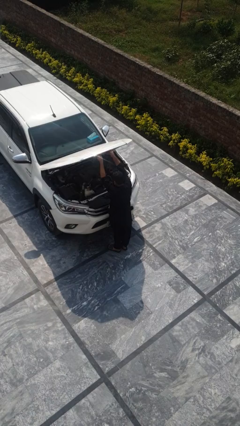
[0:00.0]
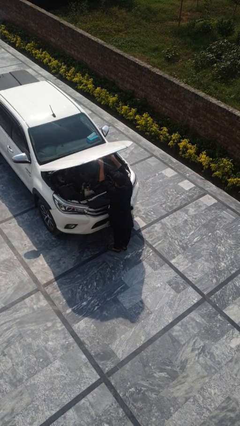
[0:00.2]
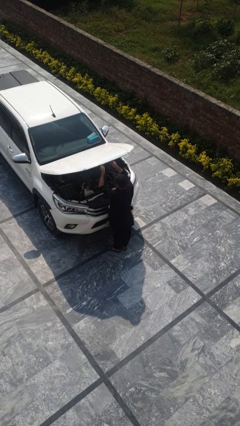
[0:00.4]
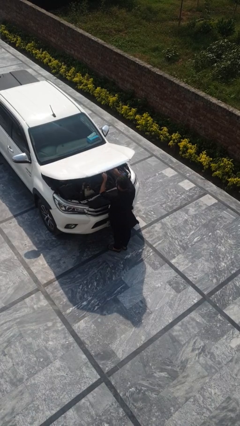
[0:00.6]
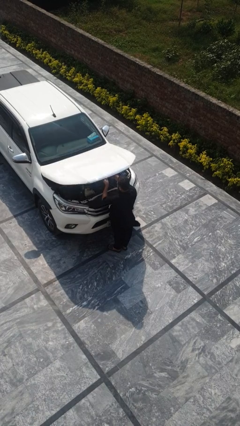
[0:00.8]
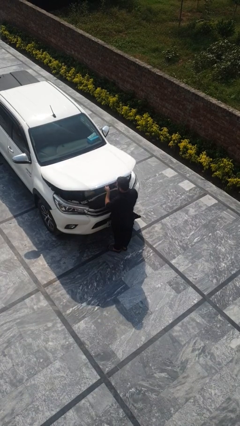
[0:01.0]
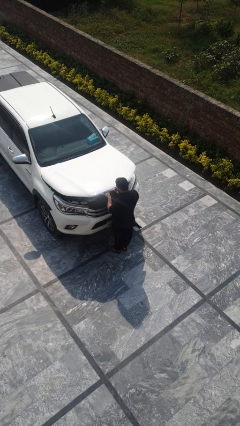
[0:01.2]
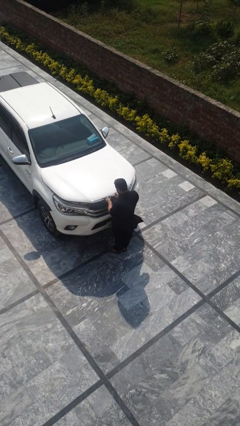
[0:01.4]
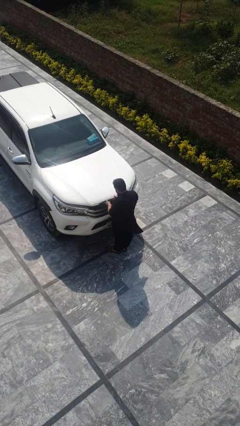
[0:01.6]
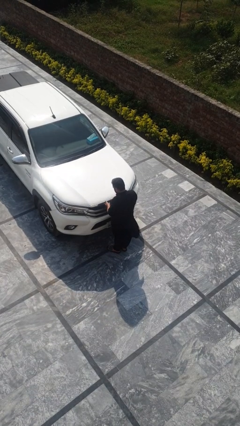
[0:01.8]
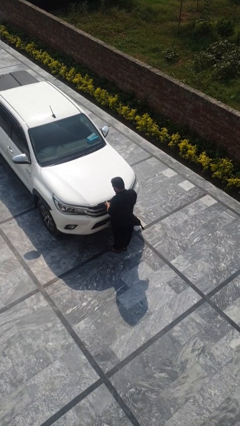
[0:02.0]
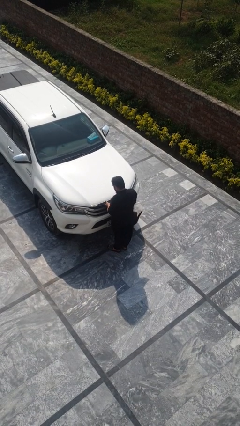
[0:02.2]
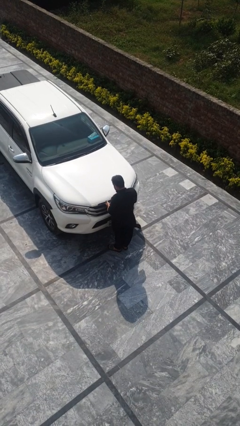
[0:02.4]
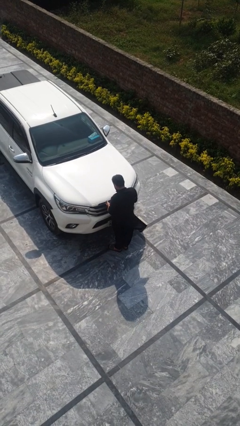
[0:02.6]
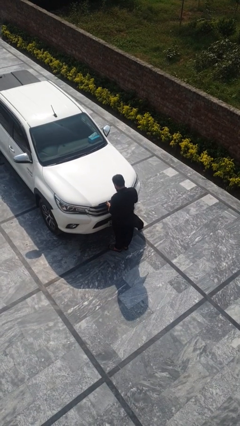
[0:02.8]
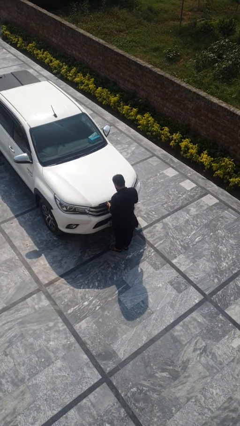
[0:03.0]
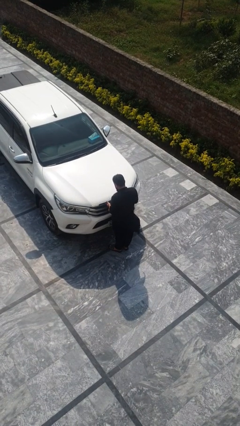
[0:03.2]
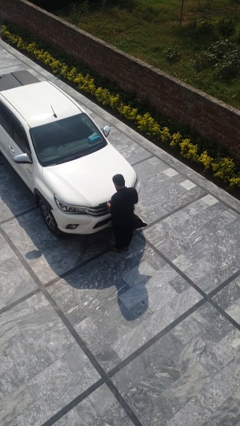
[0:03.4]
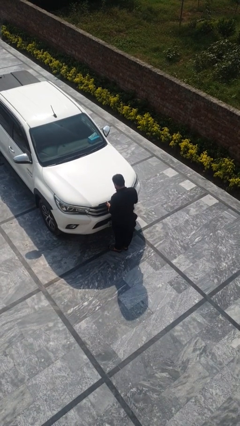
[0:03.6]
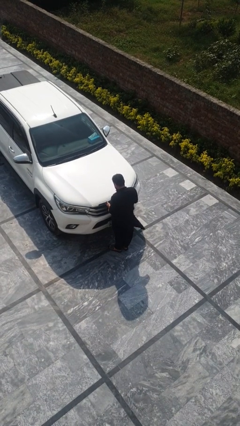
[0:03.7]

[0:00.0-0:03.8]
person closes car hood

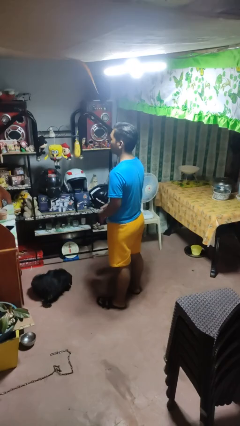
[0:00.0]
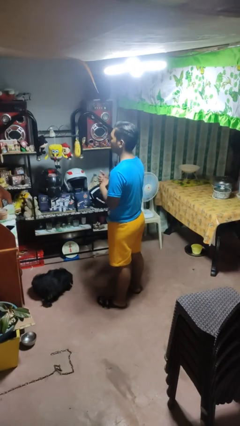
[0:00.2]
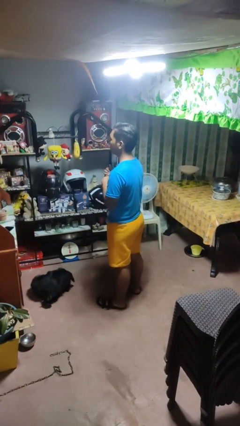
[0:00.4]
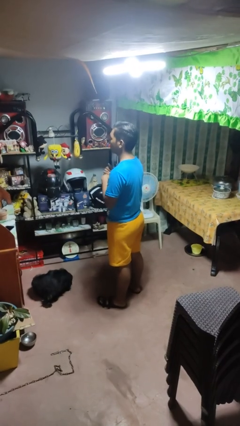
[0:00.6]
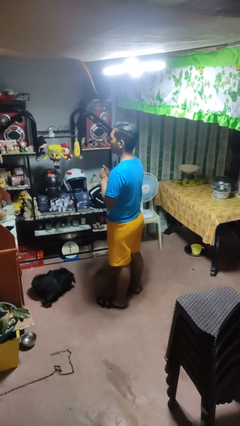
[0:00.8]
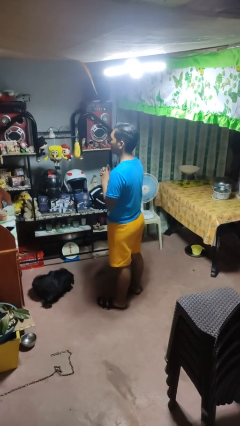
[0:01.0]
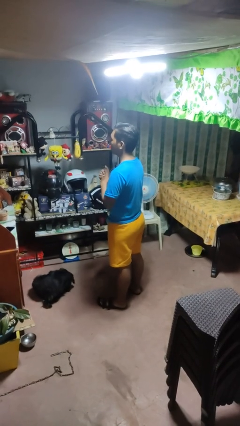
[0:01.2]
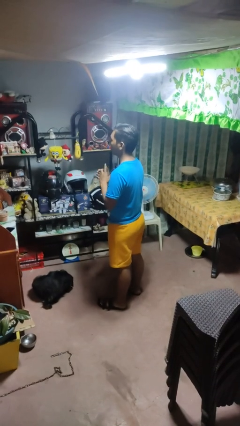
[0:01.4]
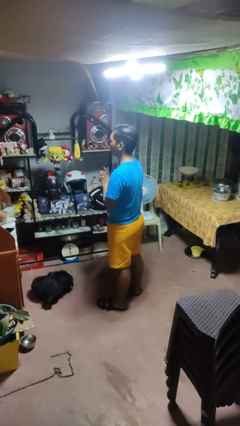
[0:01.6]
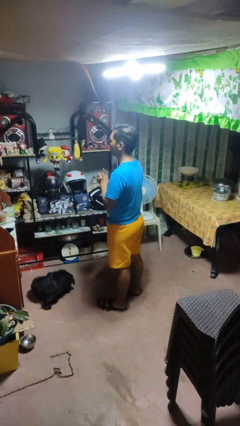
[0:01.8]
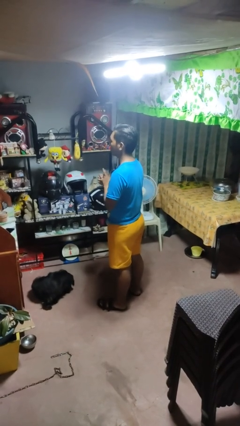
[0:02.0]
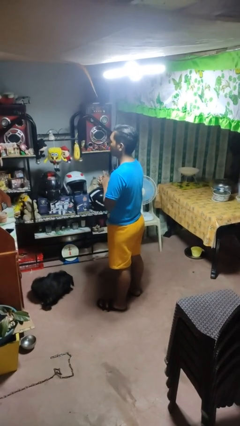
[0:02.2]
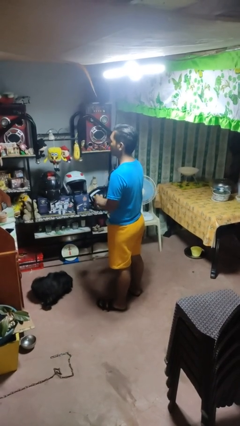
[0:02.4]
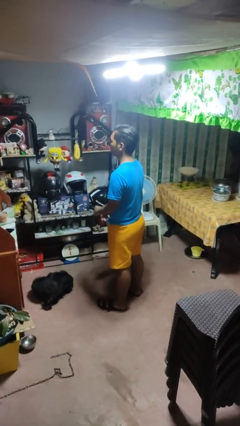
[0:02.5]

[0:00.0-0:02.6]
person cracks knuckles

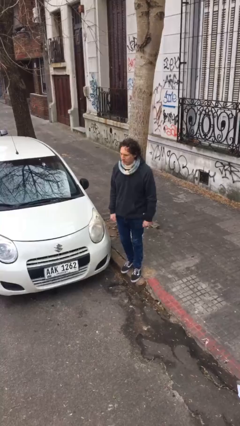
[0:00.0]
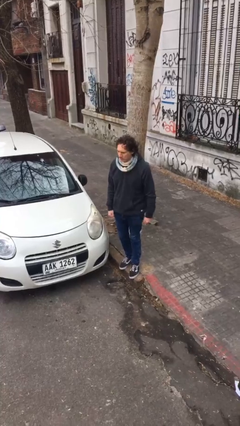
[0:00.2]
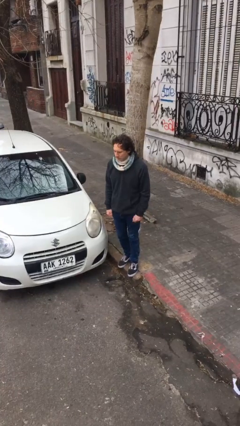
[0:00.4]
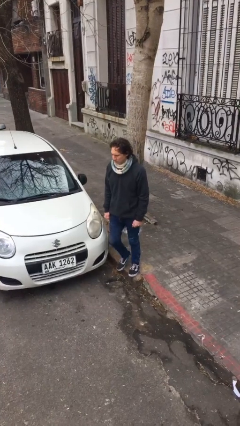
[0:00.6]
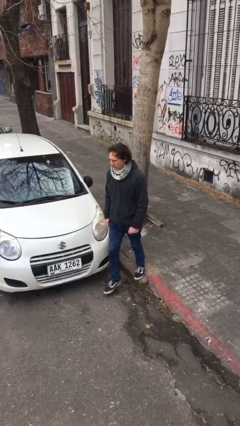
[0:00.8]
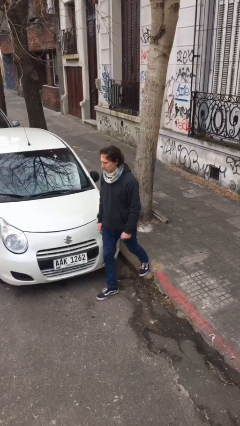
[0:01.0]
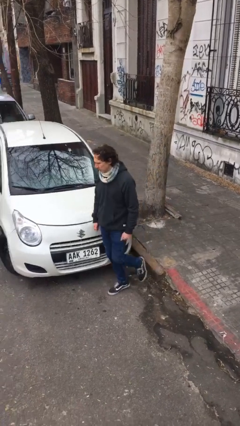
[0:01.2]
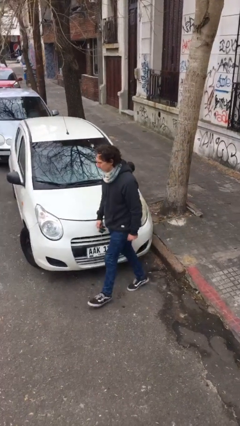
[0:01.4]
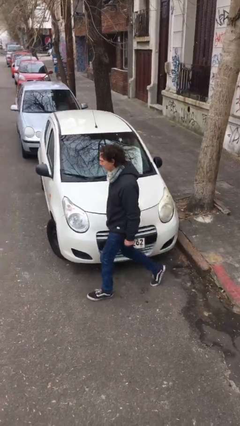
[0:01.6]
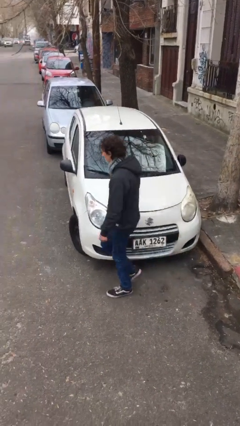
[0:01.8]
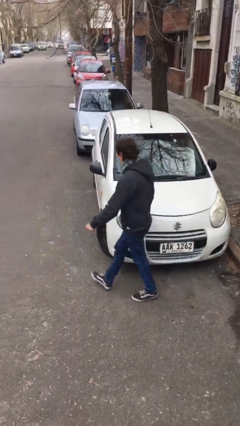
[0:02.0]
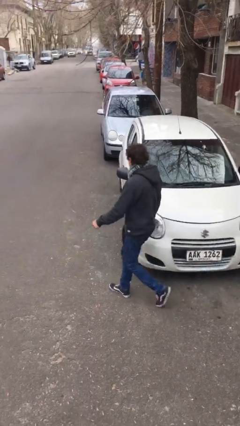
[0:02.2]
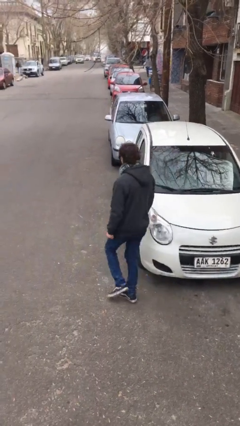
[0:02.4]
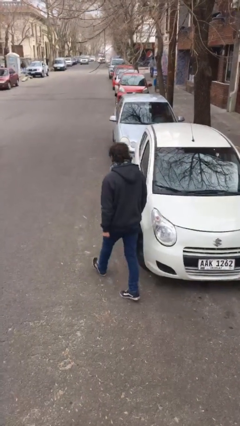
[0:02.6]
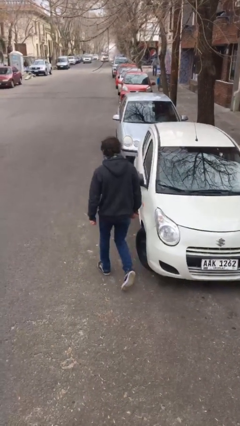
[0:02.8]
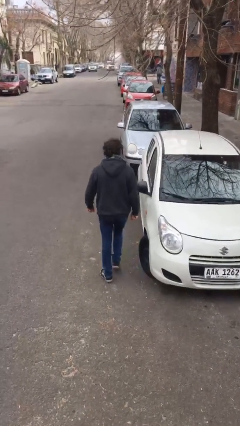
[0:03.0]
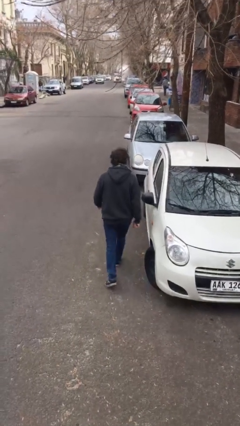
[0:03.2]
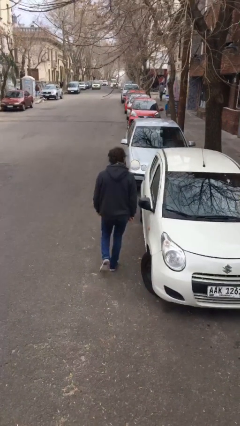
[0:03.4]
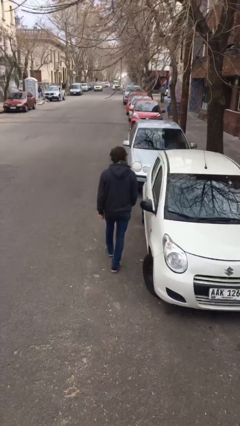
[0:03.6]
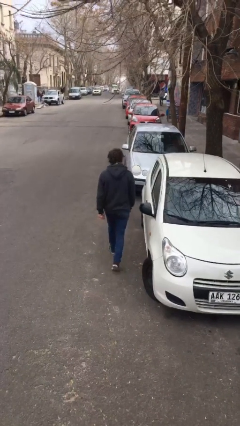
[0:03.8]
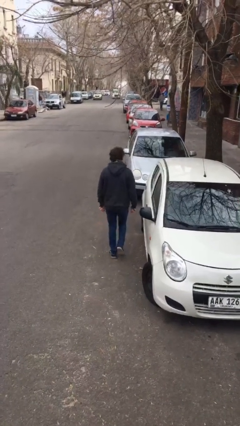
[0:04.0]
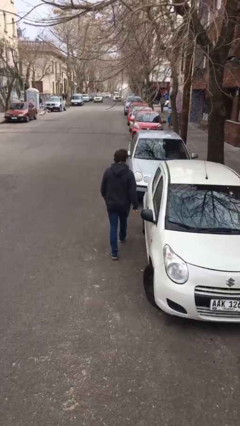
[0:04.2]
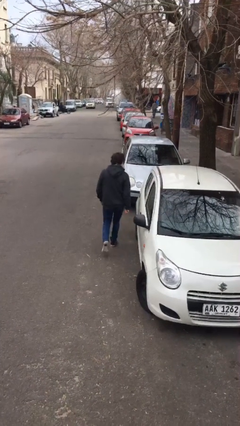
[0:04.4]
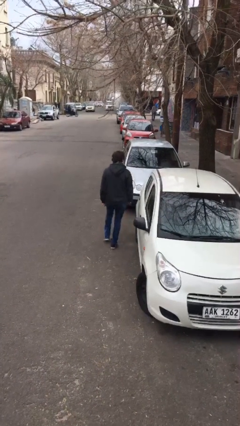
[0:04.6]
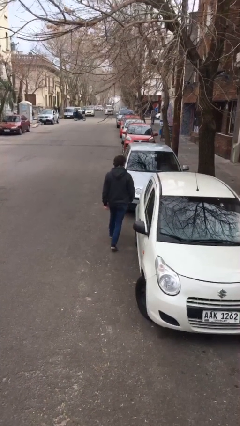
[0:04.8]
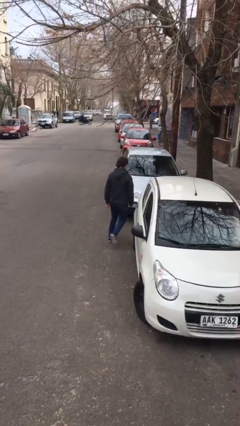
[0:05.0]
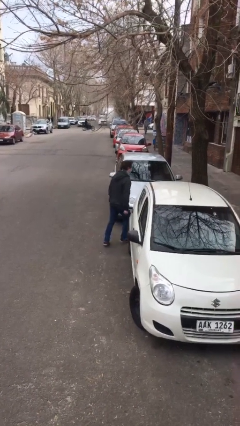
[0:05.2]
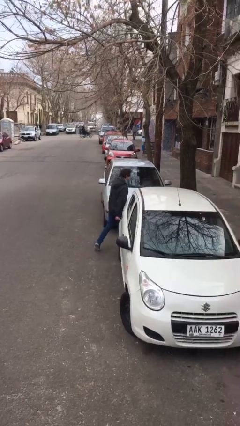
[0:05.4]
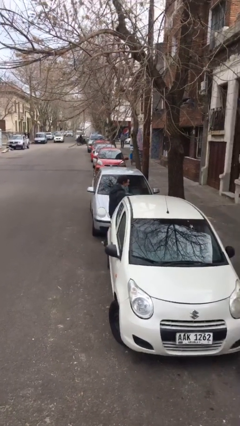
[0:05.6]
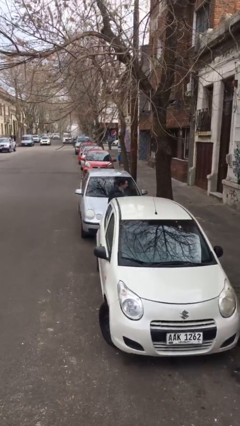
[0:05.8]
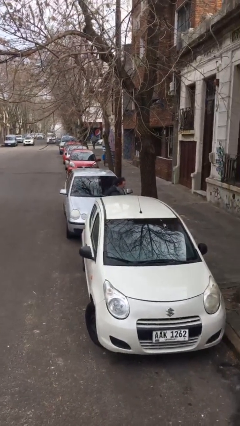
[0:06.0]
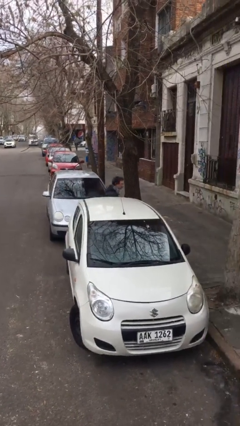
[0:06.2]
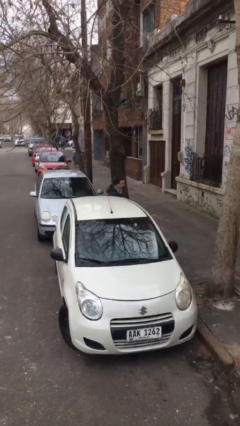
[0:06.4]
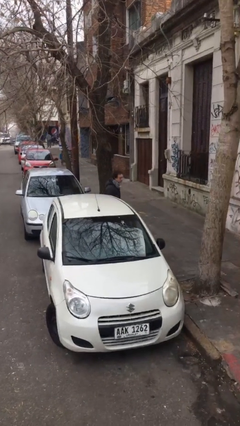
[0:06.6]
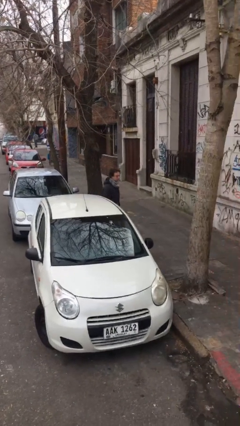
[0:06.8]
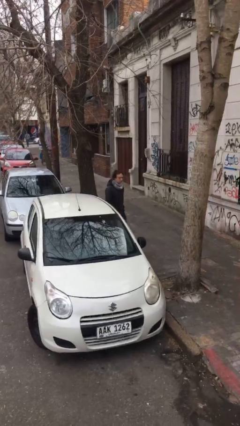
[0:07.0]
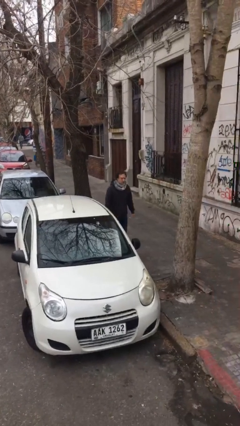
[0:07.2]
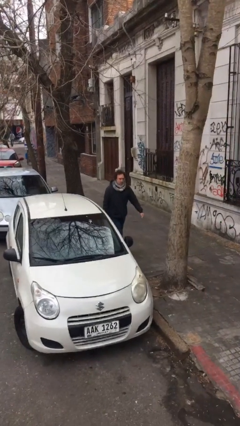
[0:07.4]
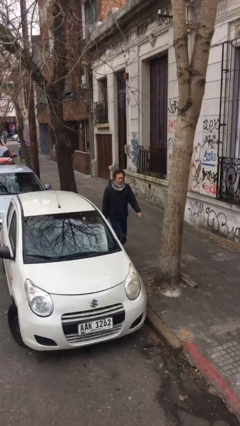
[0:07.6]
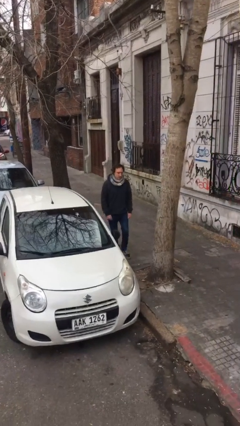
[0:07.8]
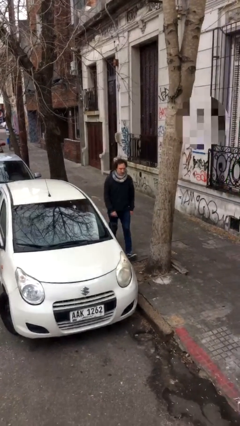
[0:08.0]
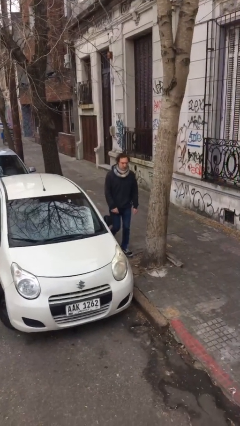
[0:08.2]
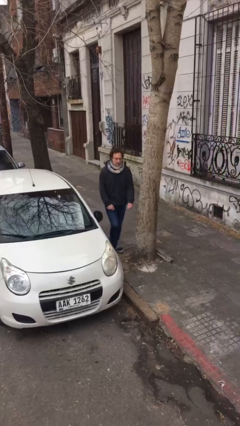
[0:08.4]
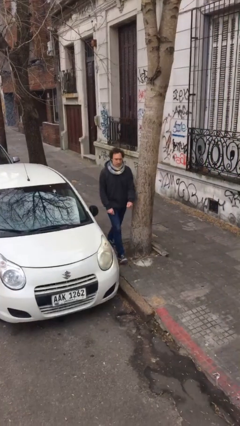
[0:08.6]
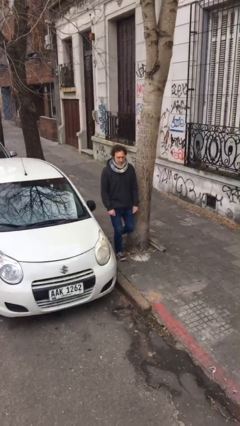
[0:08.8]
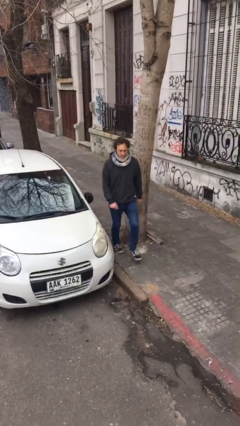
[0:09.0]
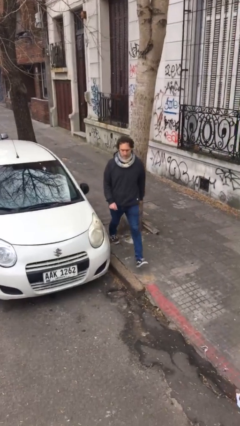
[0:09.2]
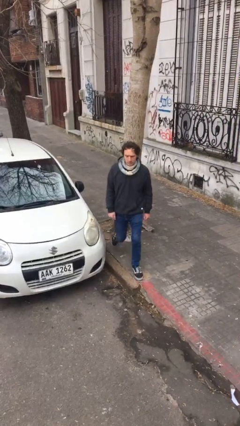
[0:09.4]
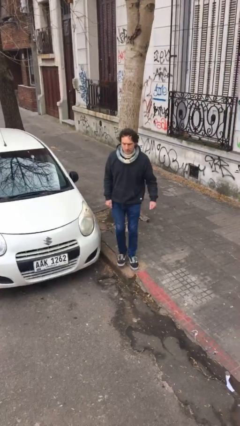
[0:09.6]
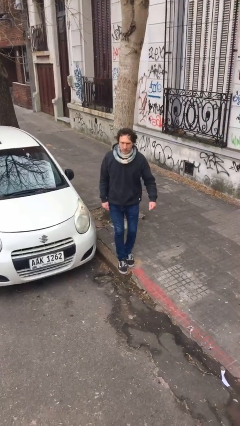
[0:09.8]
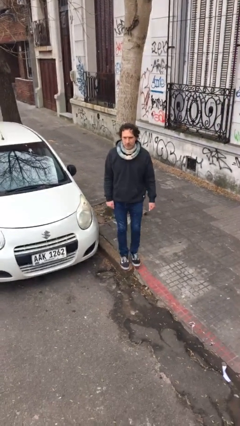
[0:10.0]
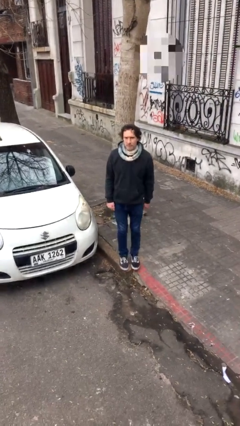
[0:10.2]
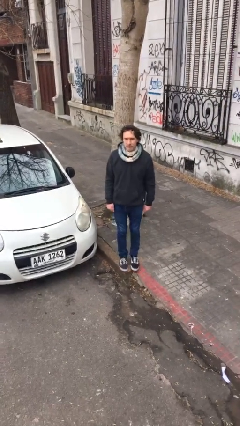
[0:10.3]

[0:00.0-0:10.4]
person walks around car

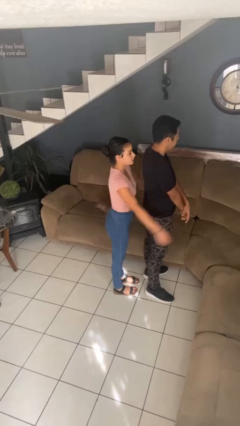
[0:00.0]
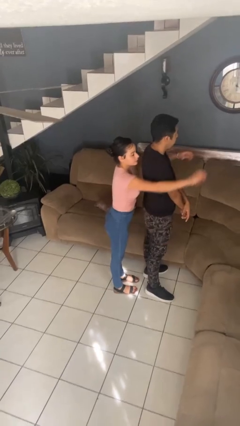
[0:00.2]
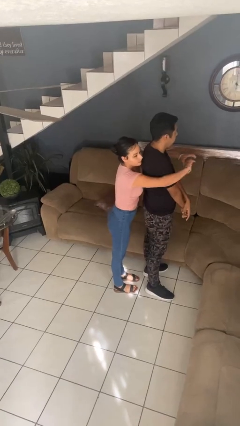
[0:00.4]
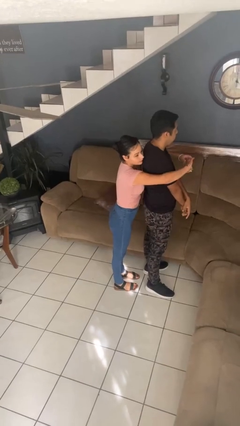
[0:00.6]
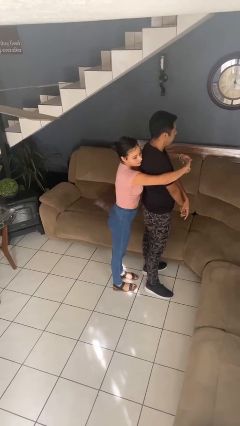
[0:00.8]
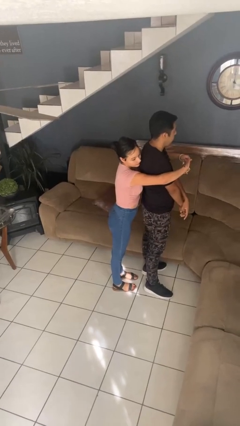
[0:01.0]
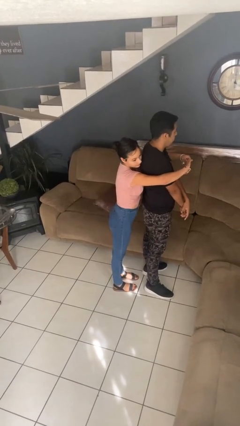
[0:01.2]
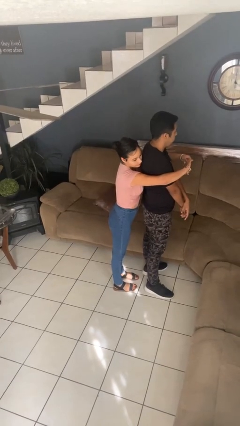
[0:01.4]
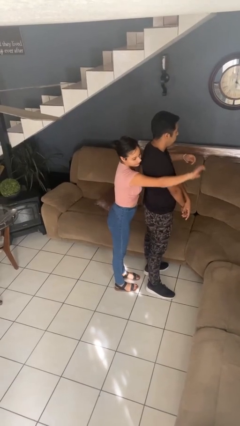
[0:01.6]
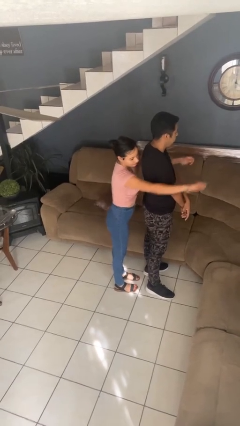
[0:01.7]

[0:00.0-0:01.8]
person hugs person from behind
